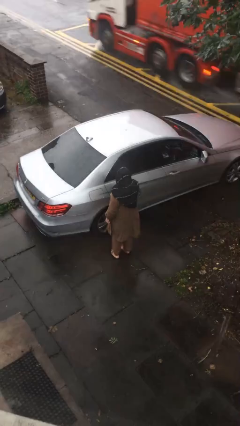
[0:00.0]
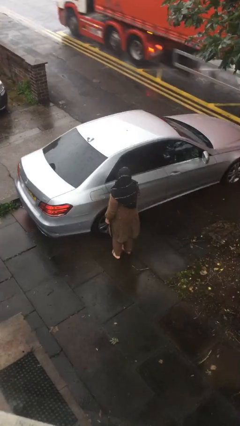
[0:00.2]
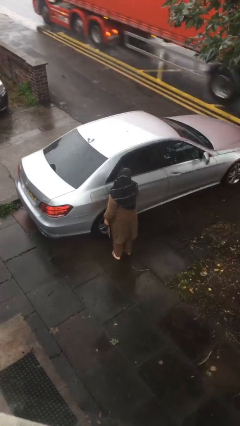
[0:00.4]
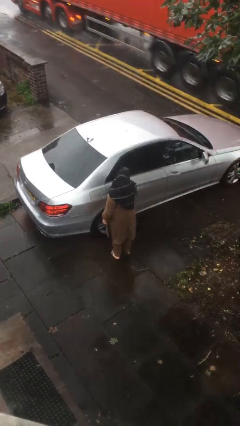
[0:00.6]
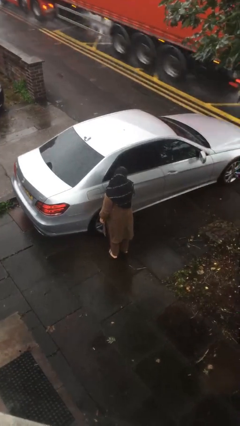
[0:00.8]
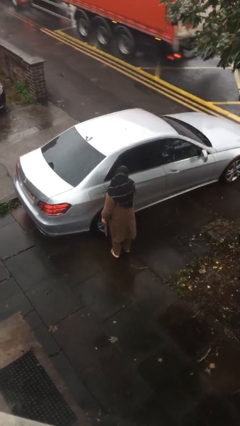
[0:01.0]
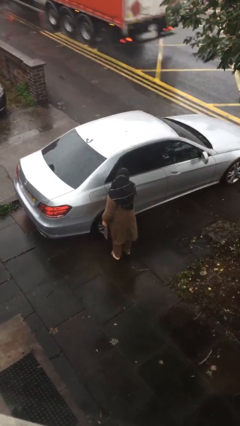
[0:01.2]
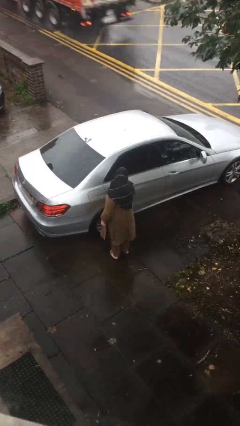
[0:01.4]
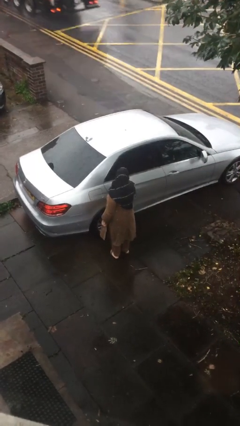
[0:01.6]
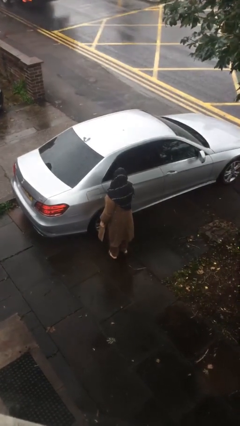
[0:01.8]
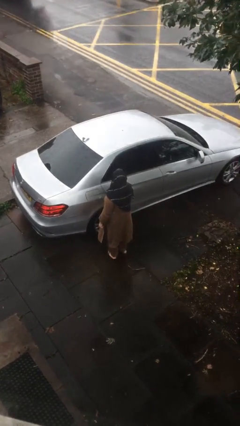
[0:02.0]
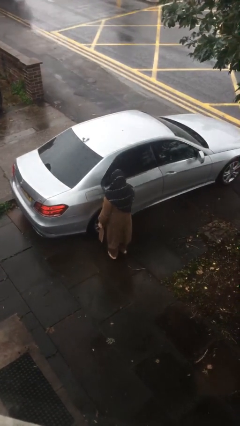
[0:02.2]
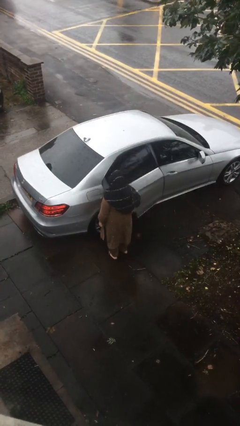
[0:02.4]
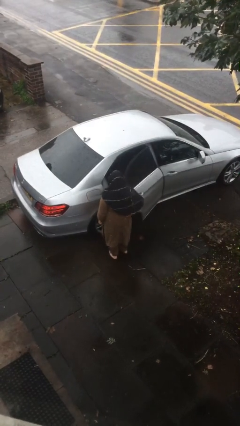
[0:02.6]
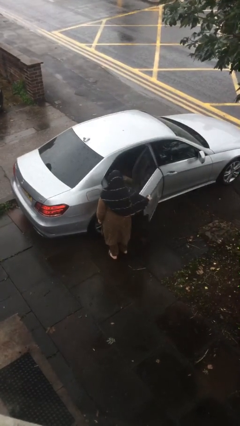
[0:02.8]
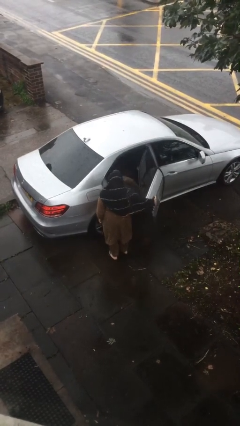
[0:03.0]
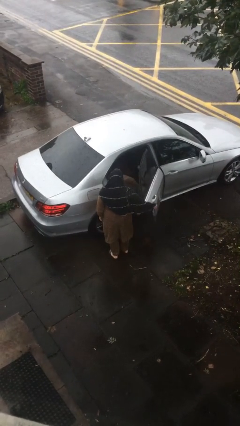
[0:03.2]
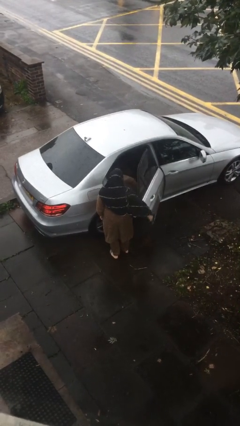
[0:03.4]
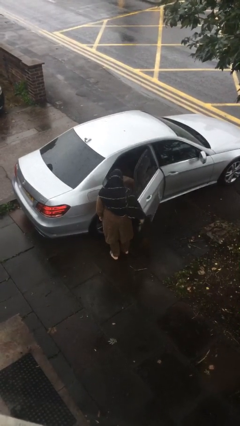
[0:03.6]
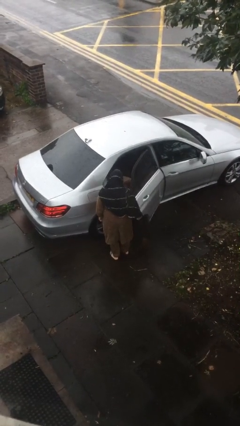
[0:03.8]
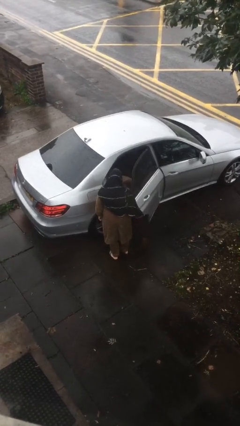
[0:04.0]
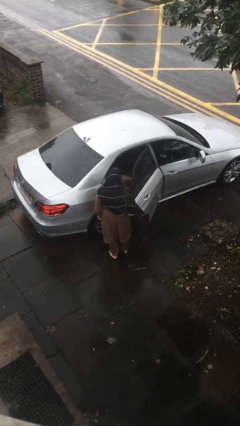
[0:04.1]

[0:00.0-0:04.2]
person opens car door

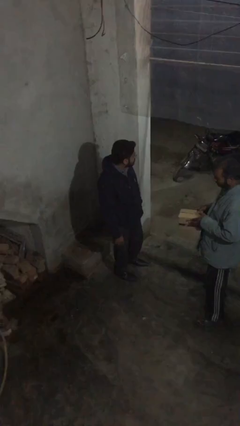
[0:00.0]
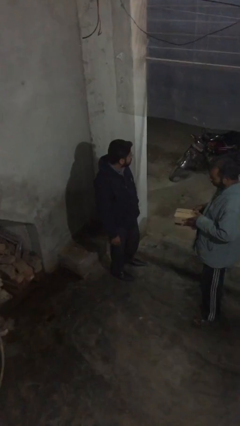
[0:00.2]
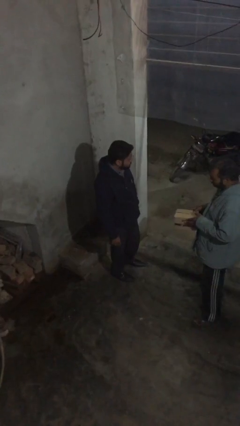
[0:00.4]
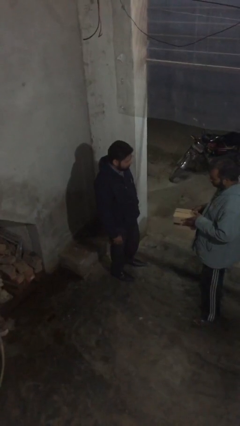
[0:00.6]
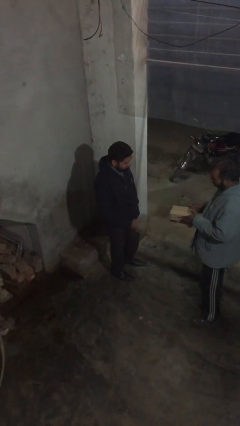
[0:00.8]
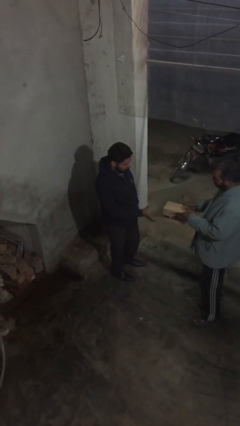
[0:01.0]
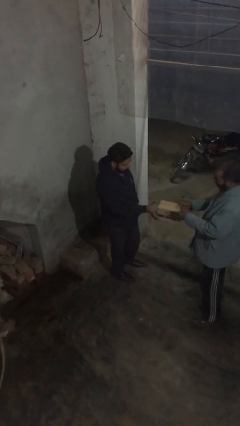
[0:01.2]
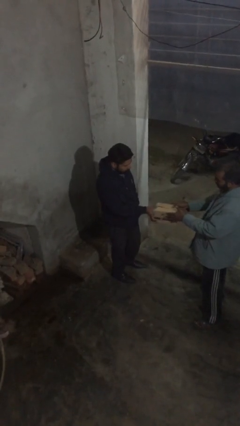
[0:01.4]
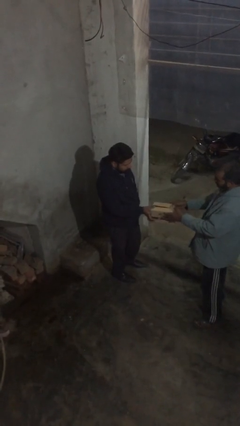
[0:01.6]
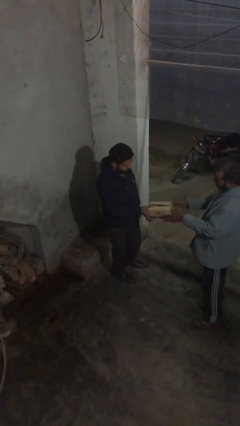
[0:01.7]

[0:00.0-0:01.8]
person transfers object to person

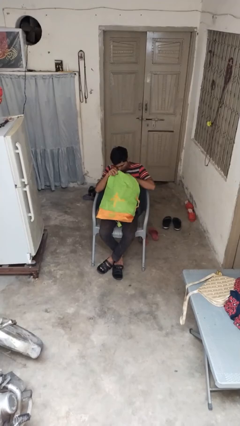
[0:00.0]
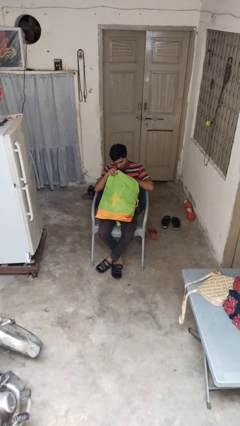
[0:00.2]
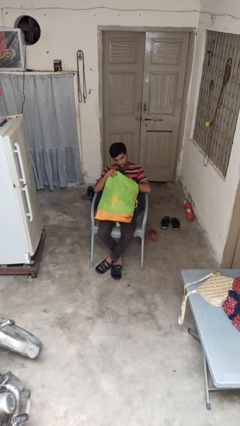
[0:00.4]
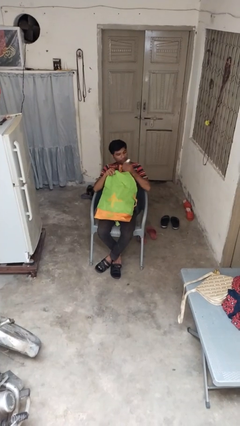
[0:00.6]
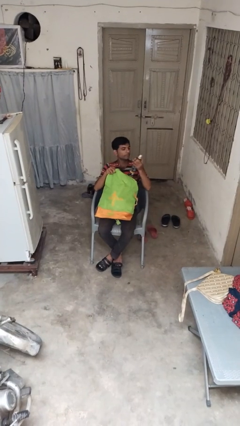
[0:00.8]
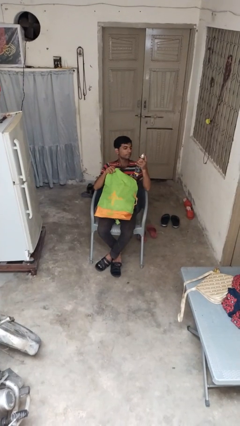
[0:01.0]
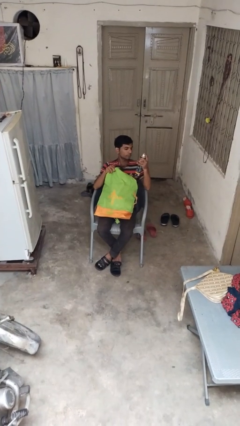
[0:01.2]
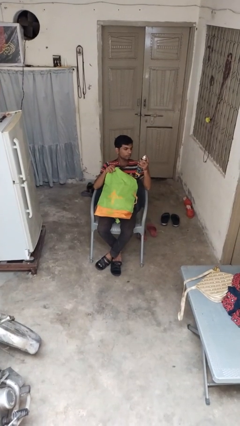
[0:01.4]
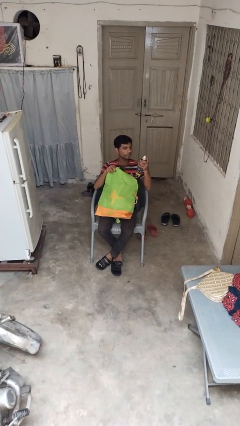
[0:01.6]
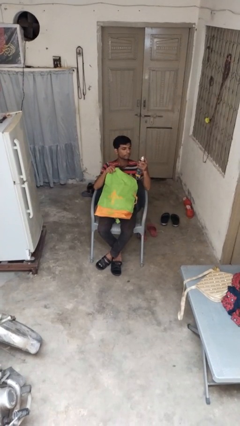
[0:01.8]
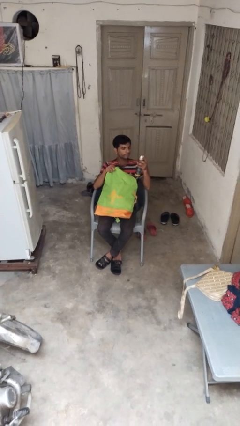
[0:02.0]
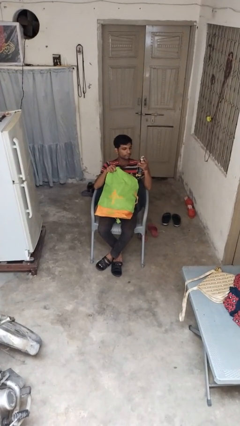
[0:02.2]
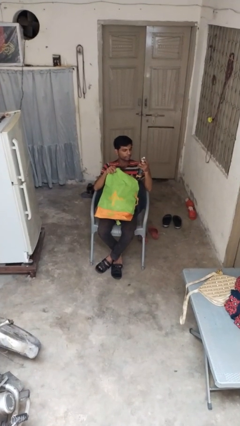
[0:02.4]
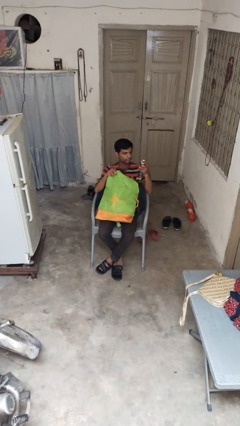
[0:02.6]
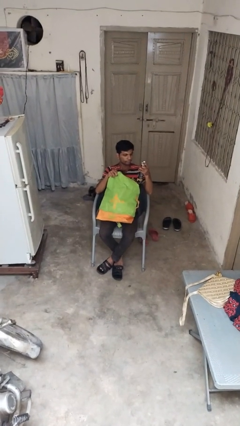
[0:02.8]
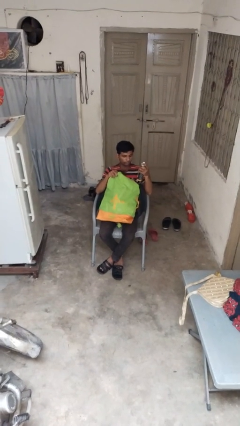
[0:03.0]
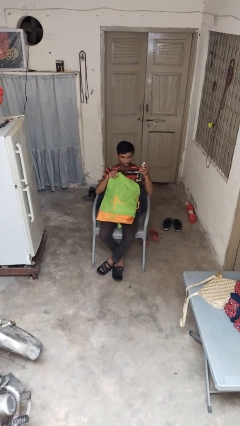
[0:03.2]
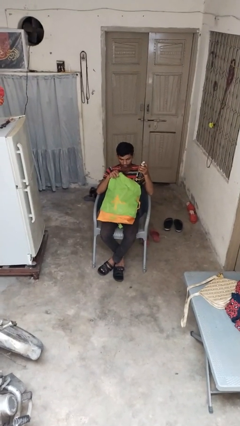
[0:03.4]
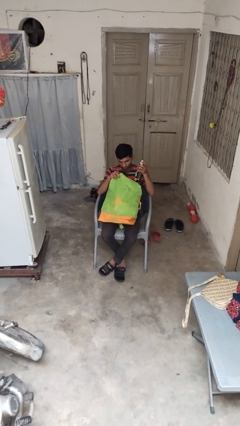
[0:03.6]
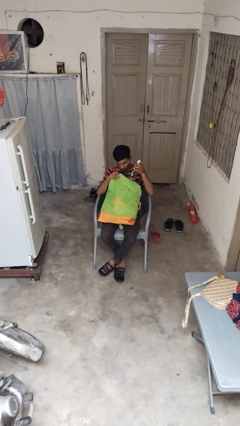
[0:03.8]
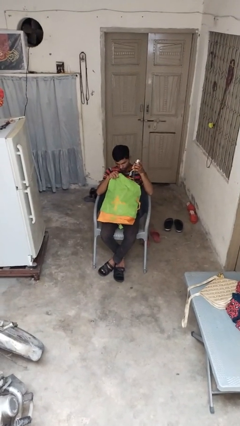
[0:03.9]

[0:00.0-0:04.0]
person takes object from backpack

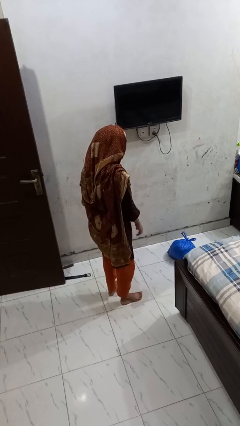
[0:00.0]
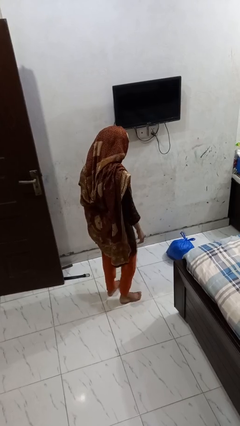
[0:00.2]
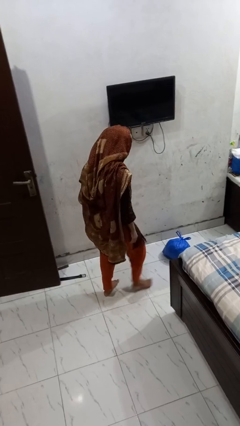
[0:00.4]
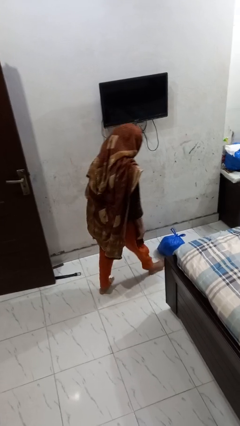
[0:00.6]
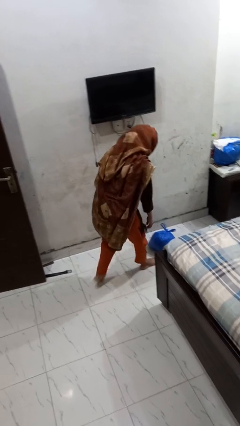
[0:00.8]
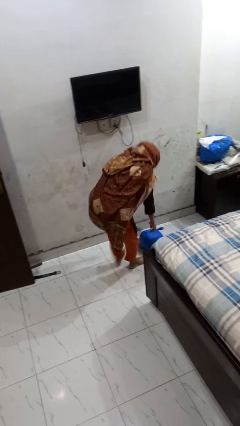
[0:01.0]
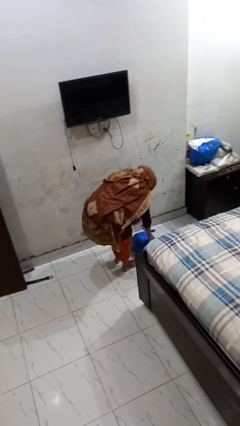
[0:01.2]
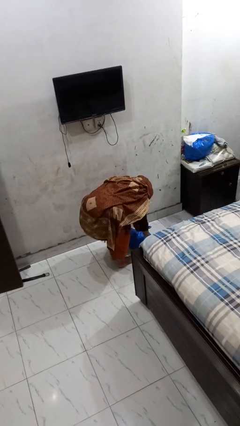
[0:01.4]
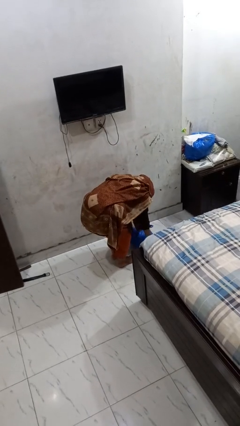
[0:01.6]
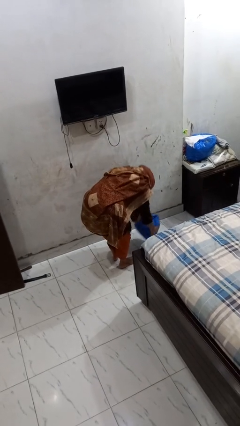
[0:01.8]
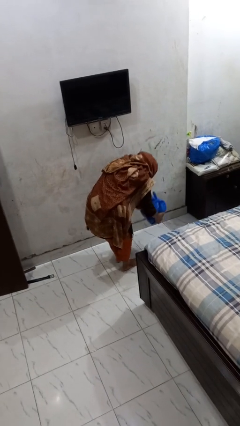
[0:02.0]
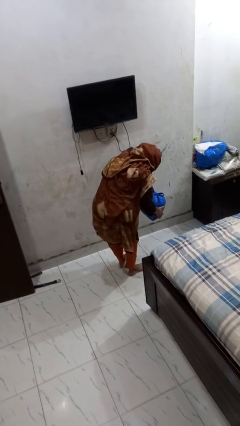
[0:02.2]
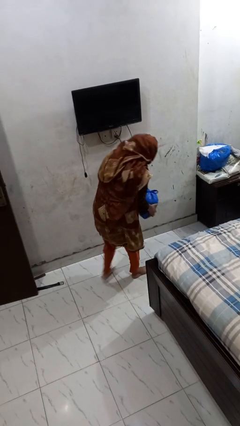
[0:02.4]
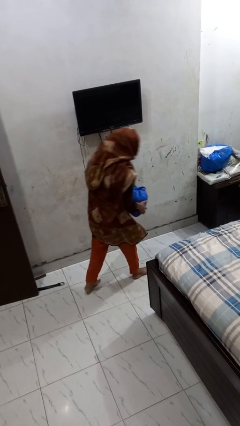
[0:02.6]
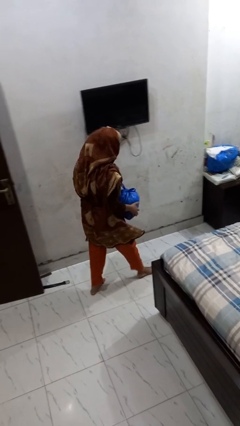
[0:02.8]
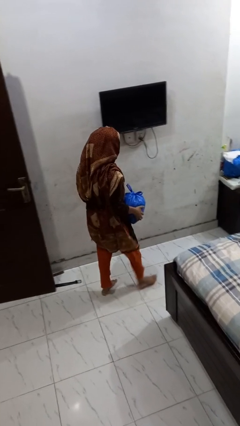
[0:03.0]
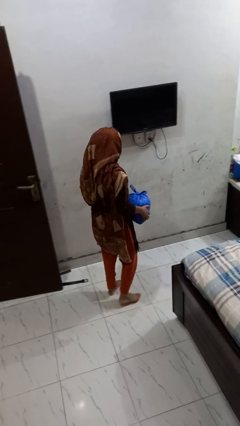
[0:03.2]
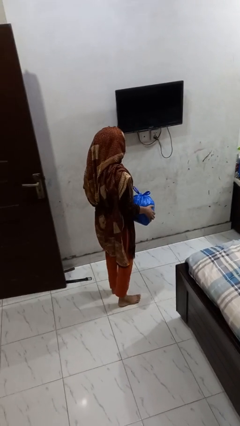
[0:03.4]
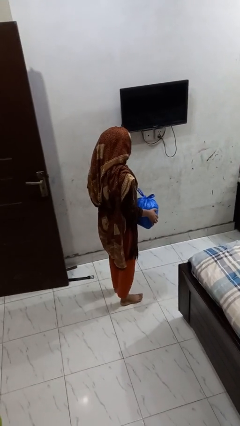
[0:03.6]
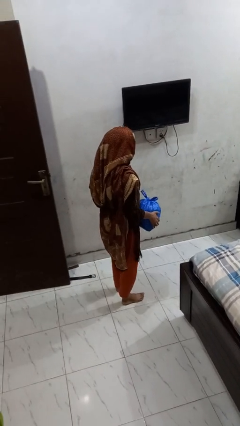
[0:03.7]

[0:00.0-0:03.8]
person picks up object from floor

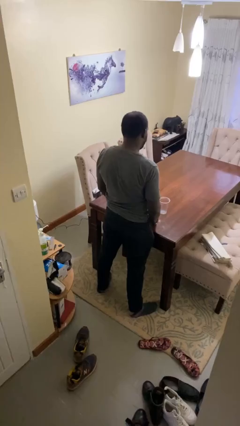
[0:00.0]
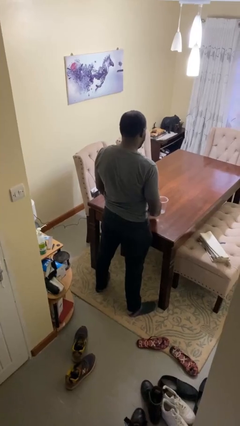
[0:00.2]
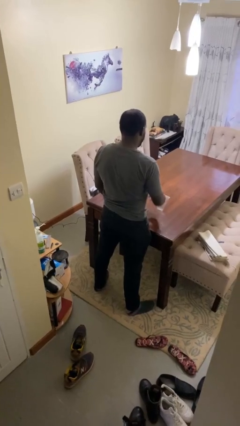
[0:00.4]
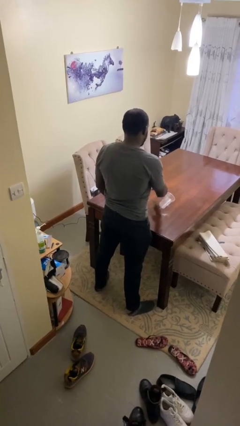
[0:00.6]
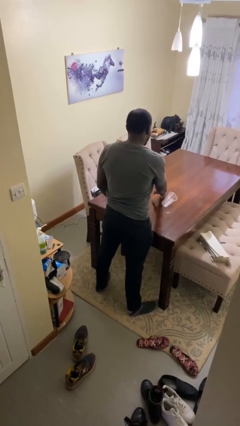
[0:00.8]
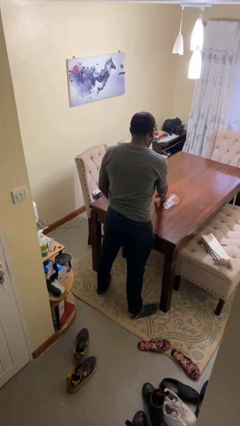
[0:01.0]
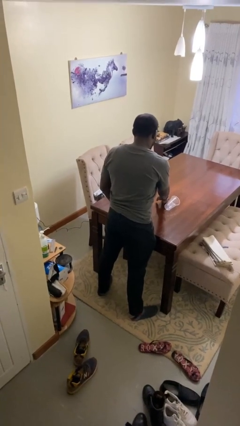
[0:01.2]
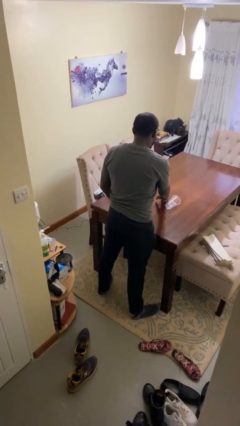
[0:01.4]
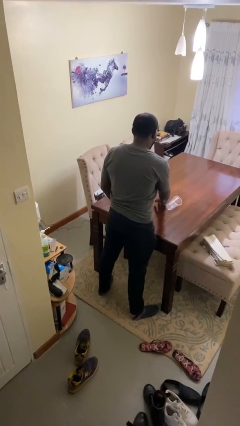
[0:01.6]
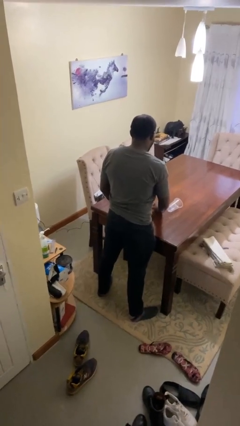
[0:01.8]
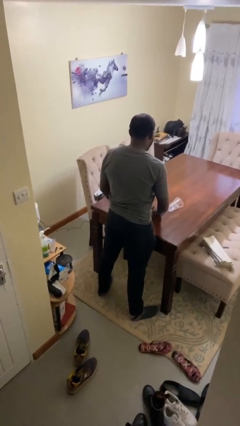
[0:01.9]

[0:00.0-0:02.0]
person knocks over glass

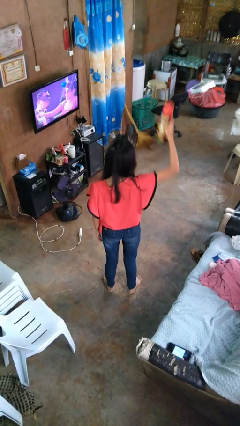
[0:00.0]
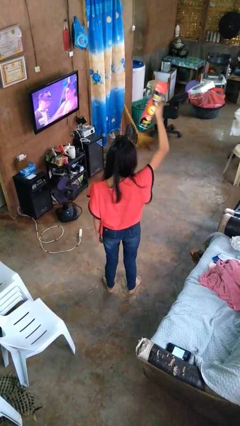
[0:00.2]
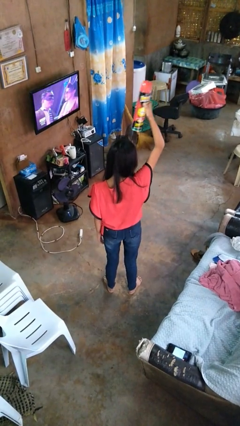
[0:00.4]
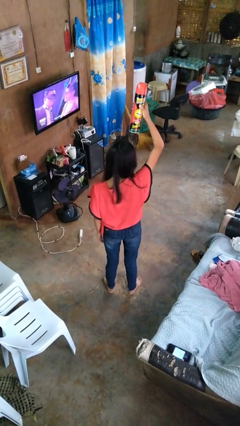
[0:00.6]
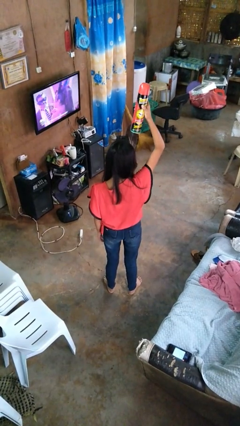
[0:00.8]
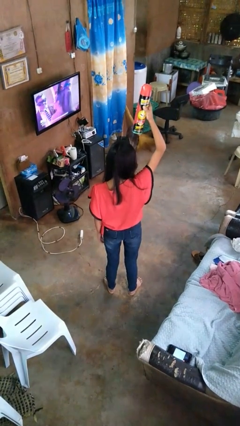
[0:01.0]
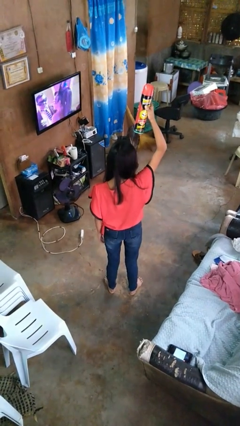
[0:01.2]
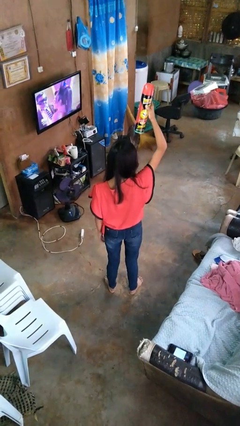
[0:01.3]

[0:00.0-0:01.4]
person holds object above head

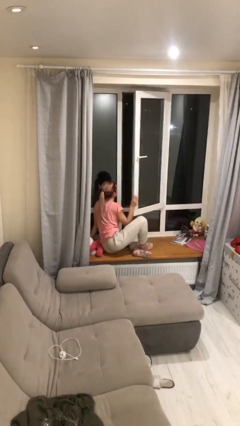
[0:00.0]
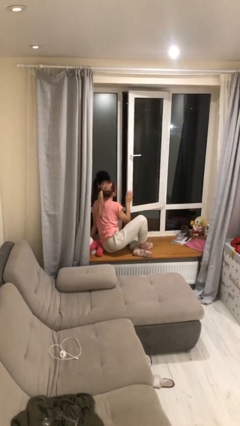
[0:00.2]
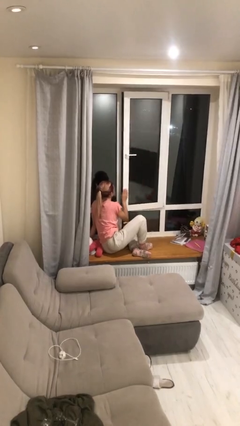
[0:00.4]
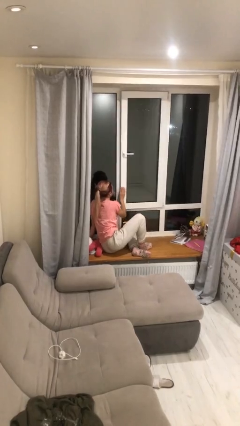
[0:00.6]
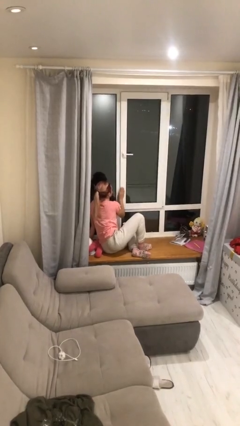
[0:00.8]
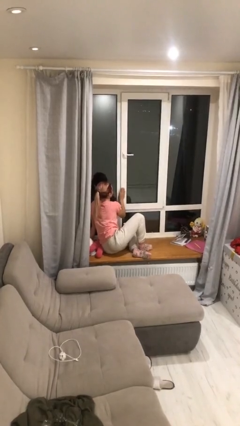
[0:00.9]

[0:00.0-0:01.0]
person closes home window
